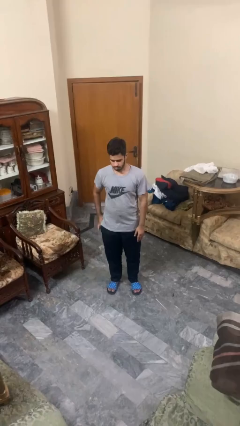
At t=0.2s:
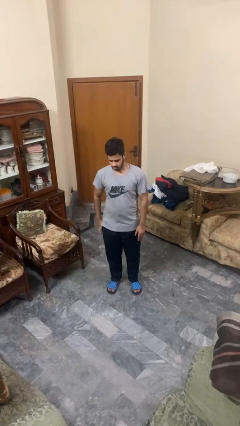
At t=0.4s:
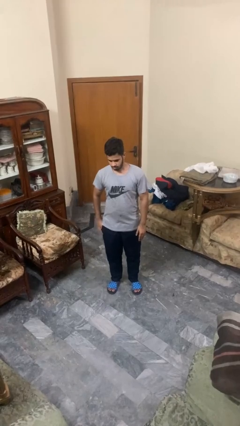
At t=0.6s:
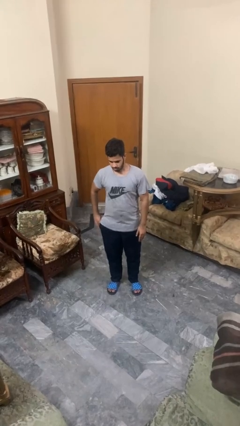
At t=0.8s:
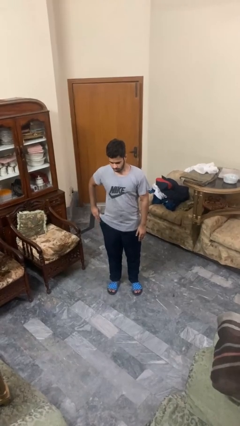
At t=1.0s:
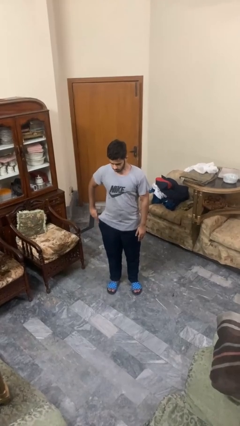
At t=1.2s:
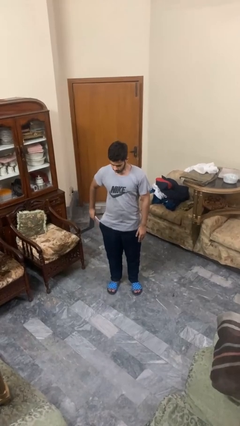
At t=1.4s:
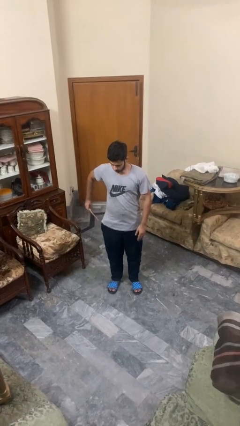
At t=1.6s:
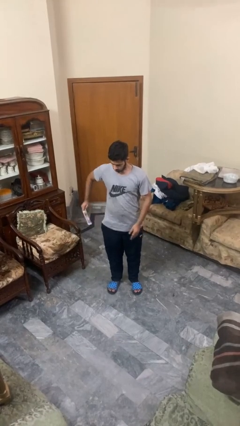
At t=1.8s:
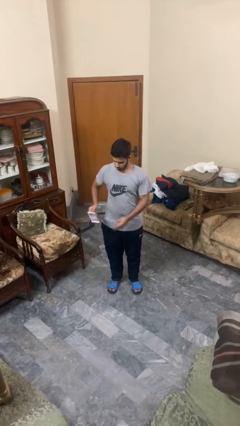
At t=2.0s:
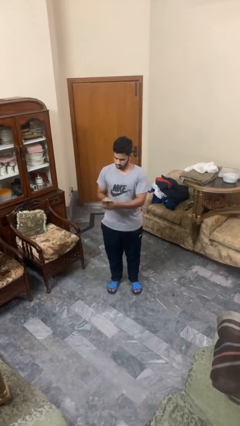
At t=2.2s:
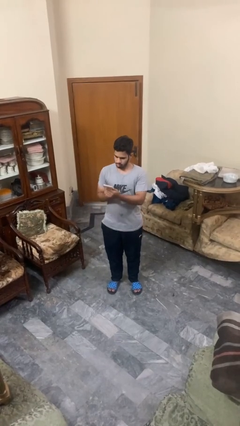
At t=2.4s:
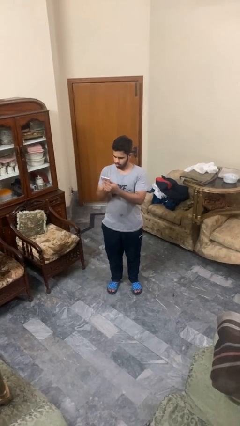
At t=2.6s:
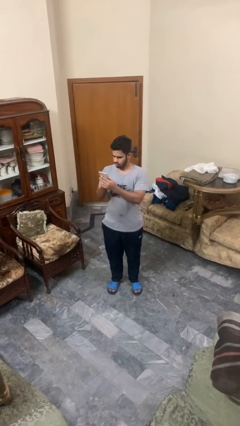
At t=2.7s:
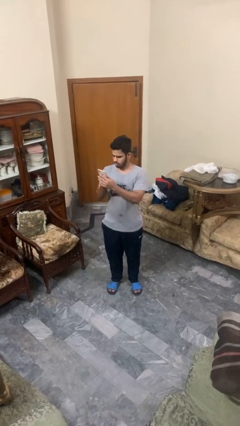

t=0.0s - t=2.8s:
person takes phone from pocket

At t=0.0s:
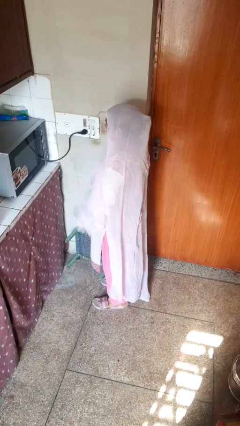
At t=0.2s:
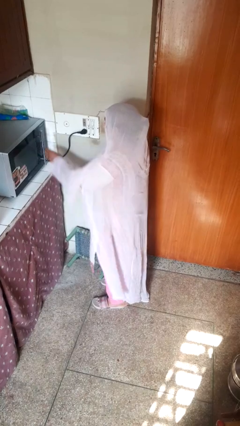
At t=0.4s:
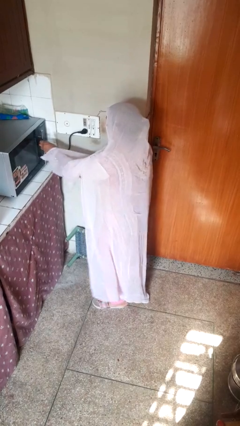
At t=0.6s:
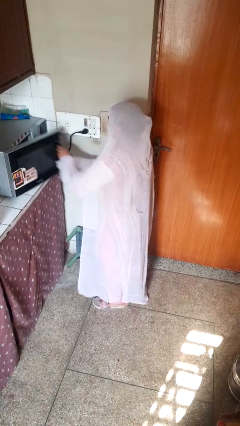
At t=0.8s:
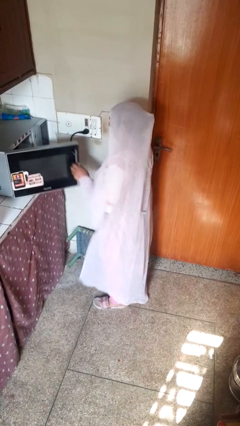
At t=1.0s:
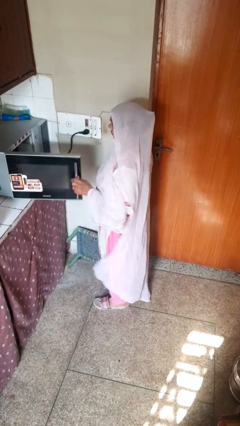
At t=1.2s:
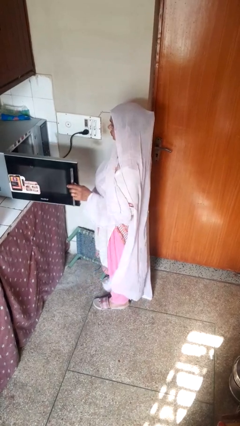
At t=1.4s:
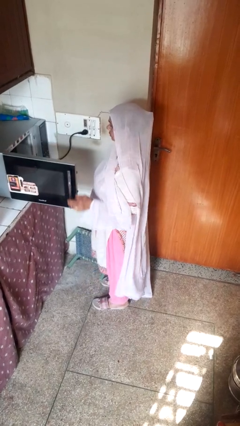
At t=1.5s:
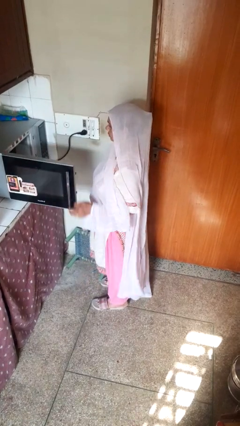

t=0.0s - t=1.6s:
person opens oven door

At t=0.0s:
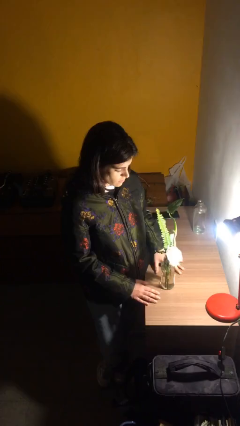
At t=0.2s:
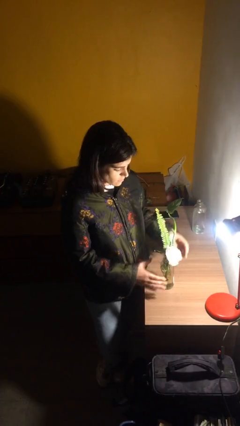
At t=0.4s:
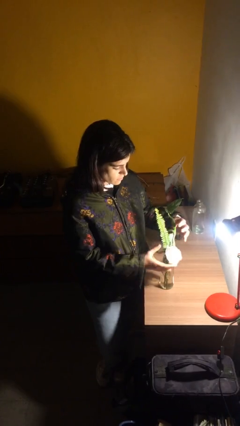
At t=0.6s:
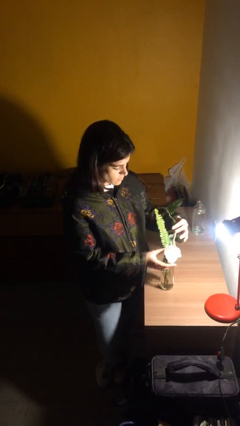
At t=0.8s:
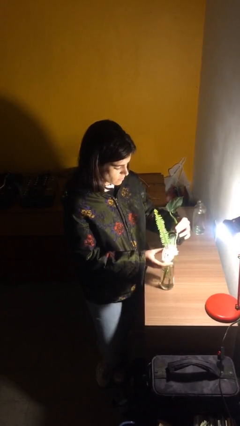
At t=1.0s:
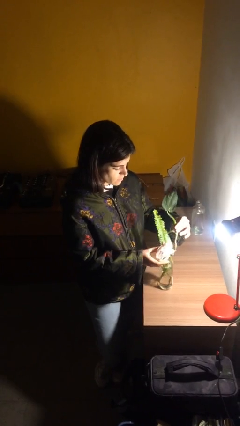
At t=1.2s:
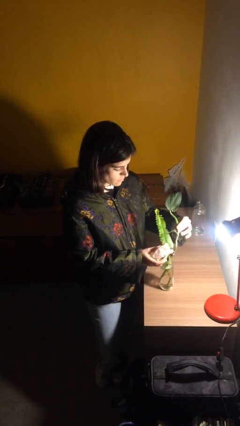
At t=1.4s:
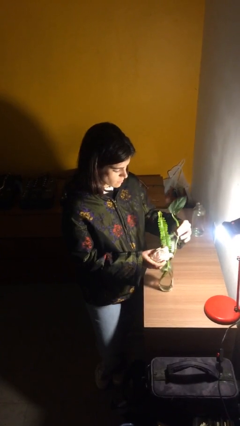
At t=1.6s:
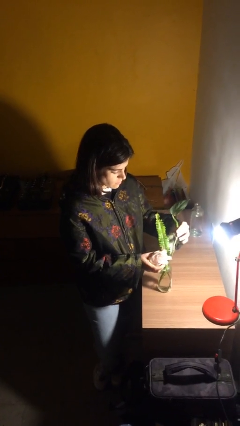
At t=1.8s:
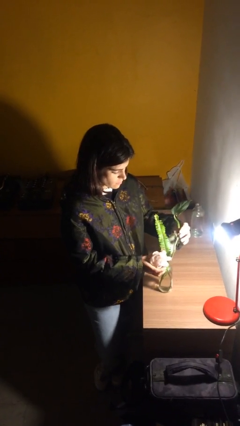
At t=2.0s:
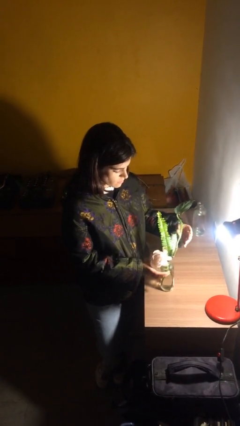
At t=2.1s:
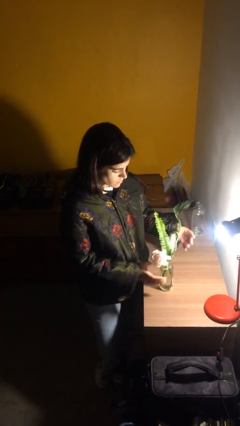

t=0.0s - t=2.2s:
person arranges flowers in vase

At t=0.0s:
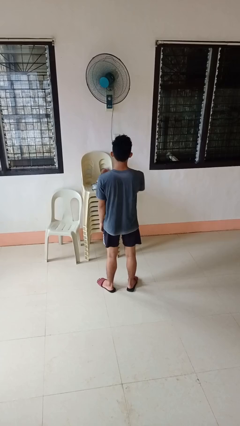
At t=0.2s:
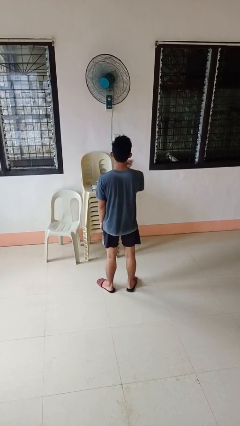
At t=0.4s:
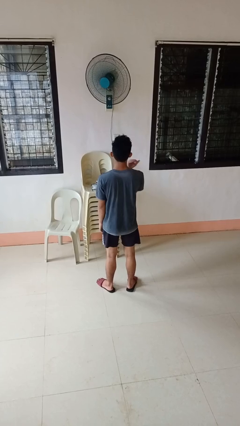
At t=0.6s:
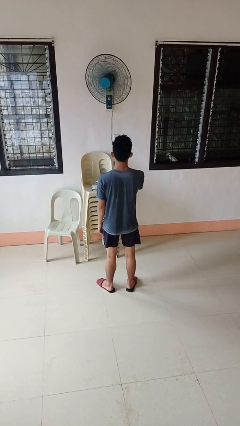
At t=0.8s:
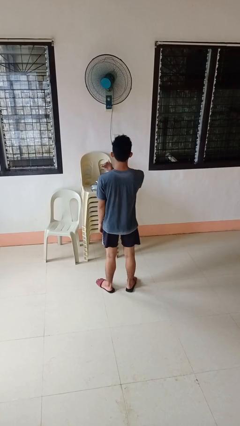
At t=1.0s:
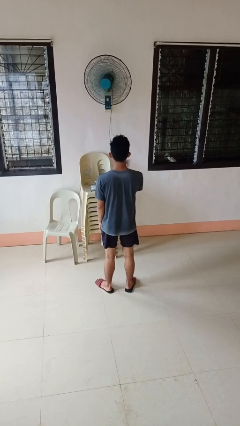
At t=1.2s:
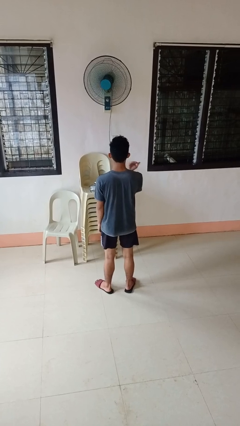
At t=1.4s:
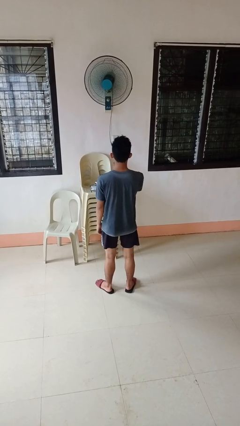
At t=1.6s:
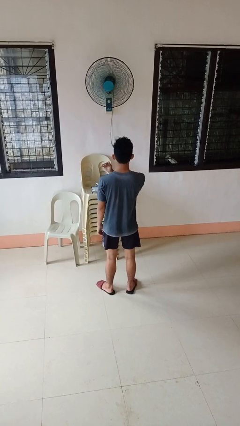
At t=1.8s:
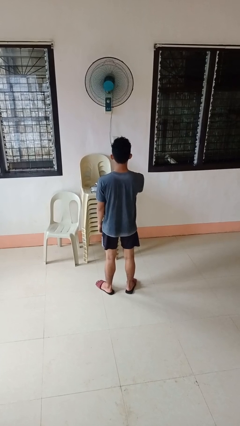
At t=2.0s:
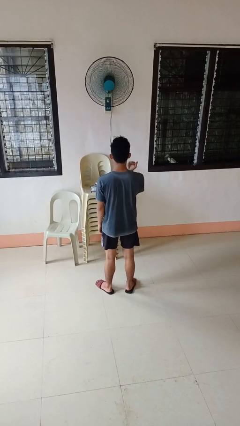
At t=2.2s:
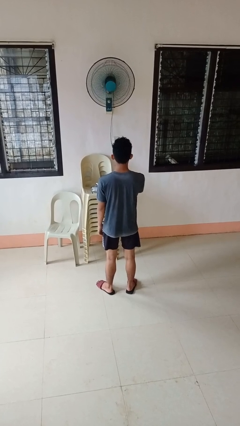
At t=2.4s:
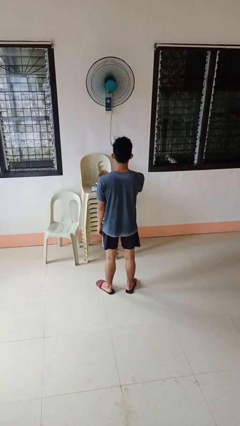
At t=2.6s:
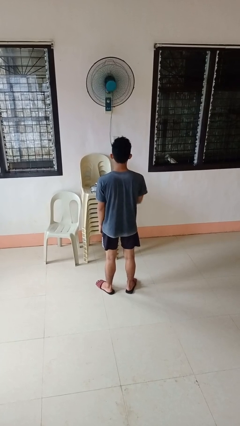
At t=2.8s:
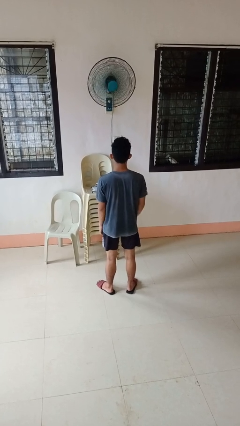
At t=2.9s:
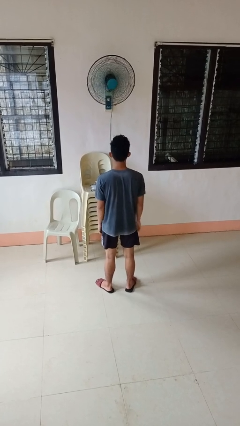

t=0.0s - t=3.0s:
person gestures cut

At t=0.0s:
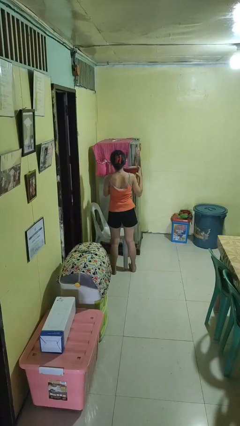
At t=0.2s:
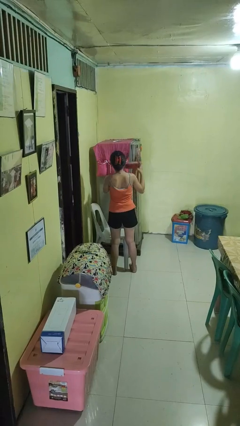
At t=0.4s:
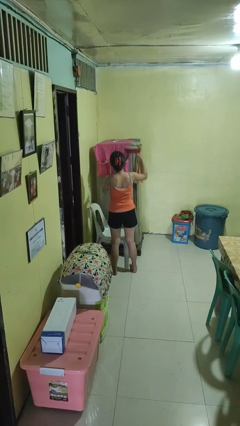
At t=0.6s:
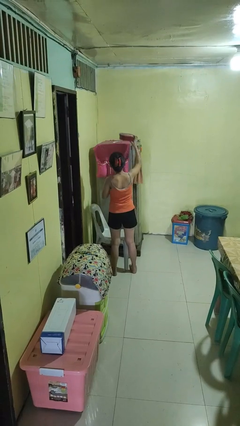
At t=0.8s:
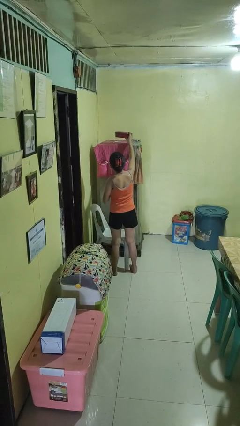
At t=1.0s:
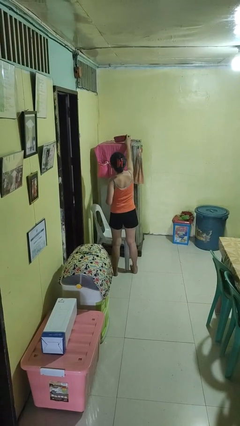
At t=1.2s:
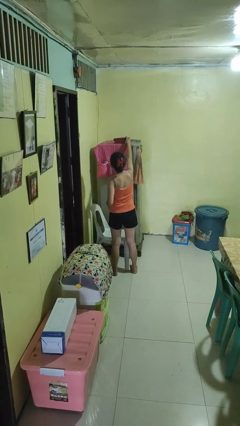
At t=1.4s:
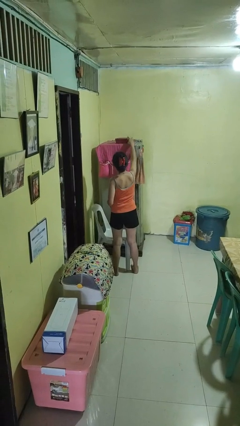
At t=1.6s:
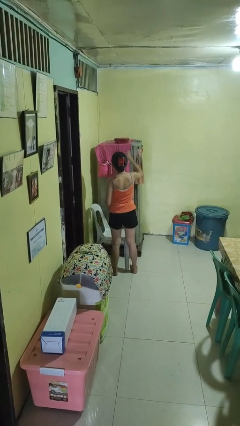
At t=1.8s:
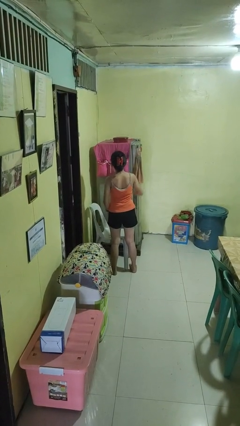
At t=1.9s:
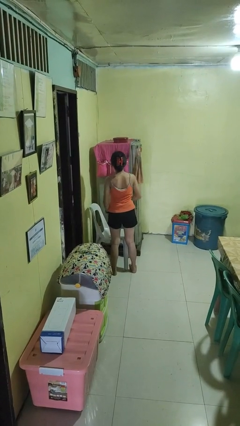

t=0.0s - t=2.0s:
person puts down object on shelf

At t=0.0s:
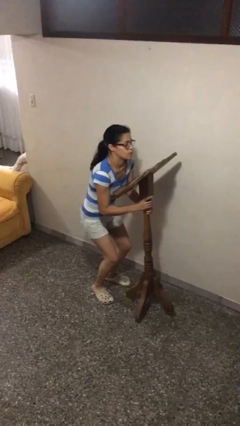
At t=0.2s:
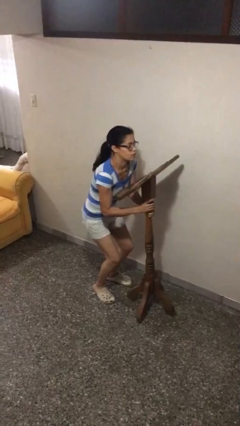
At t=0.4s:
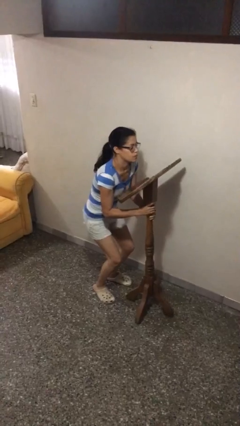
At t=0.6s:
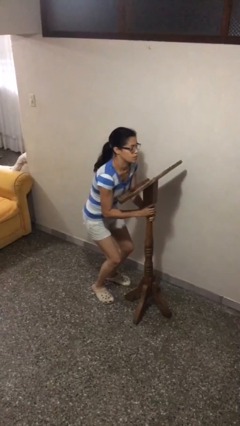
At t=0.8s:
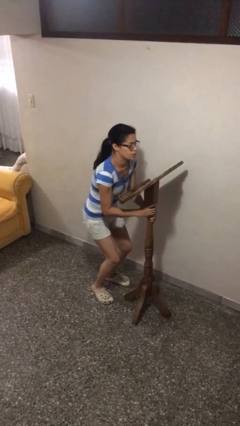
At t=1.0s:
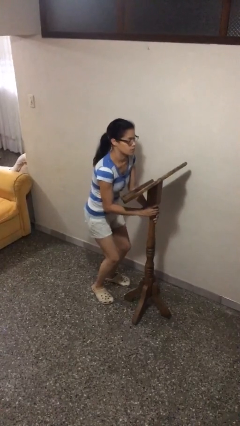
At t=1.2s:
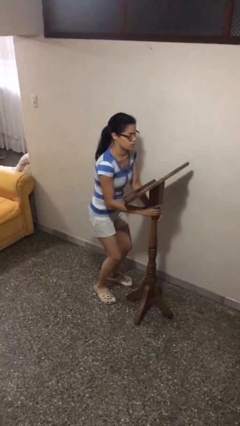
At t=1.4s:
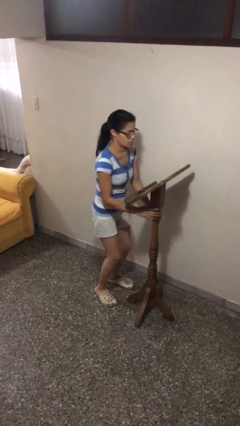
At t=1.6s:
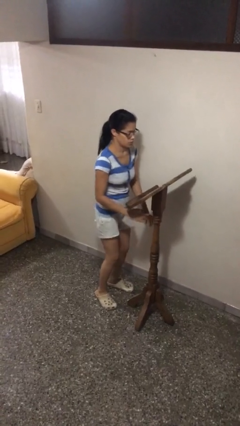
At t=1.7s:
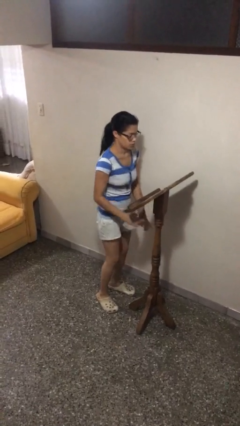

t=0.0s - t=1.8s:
person puts down object on floor

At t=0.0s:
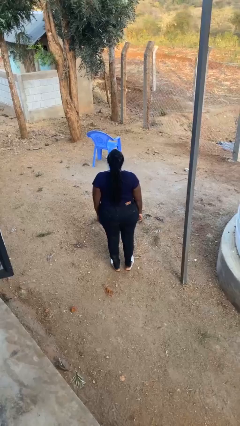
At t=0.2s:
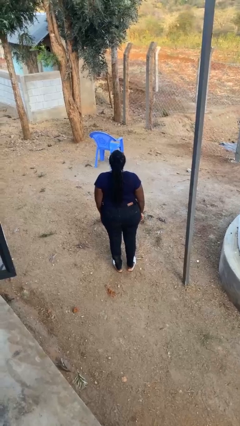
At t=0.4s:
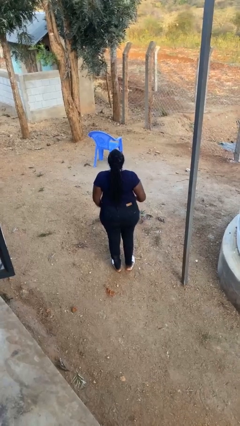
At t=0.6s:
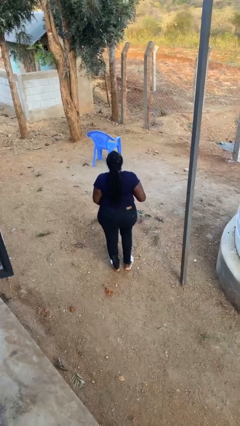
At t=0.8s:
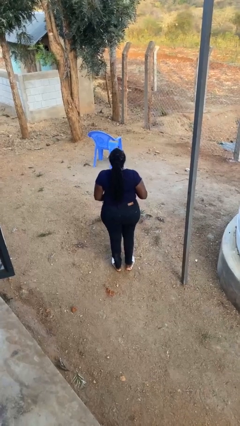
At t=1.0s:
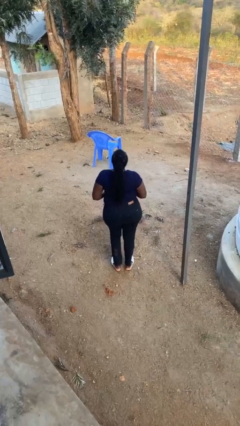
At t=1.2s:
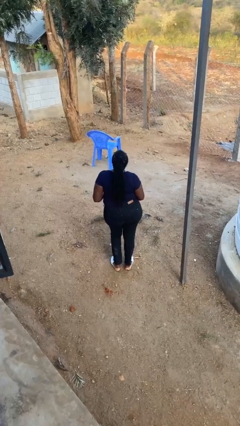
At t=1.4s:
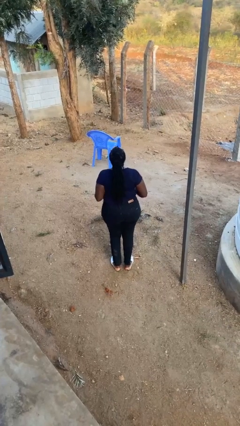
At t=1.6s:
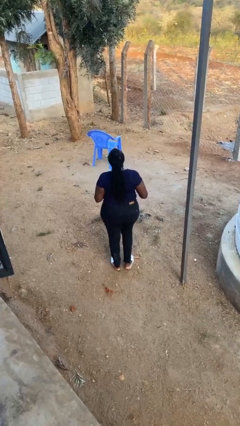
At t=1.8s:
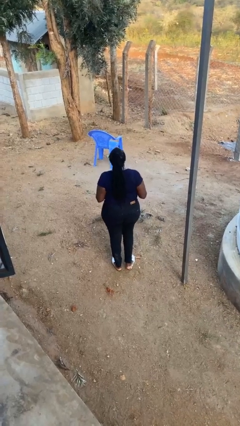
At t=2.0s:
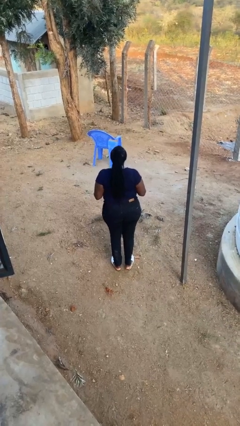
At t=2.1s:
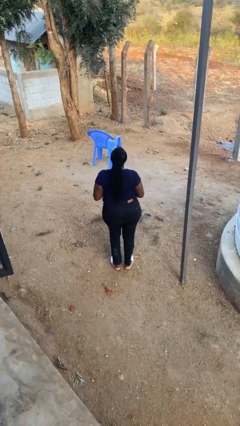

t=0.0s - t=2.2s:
person wiggles hips

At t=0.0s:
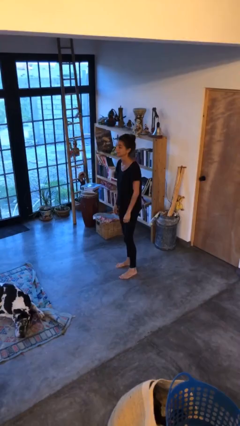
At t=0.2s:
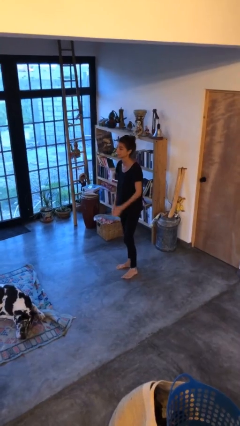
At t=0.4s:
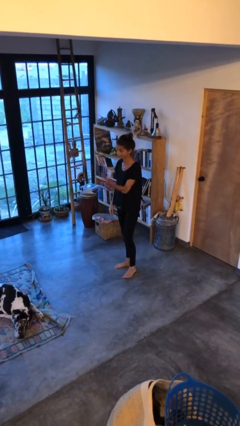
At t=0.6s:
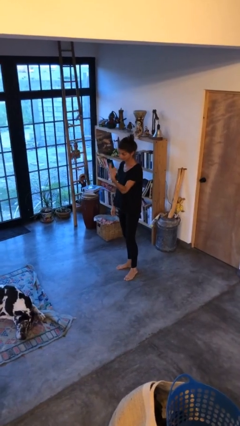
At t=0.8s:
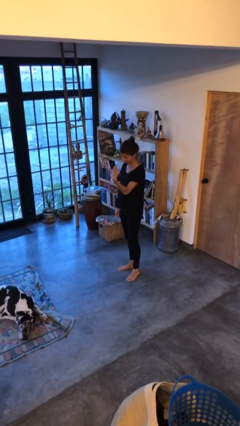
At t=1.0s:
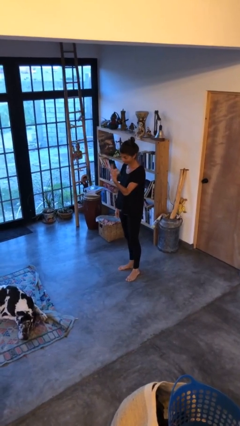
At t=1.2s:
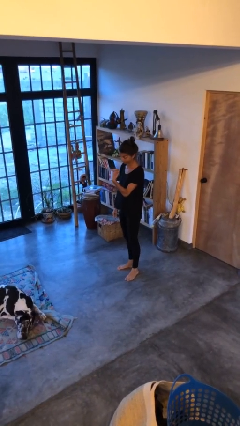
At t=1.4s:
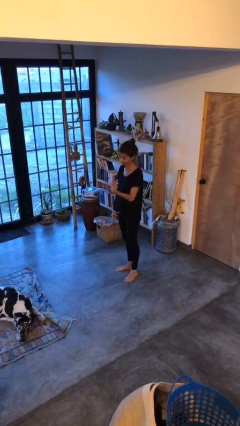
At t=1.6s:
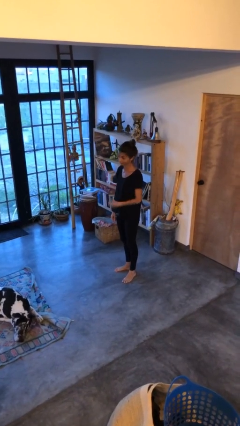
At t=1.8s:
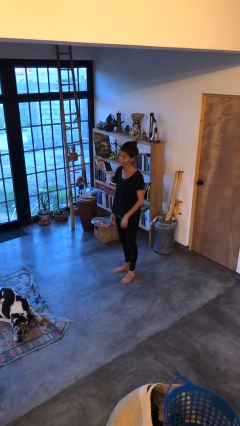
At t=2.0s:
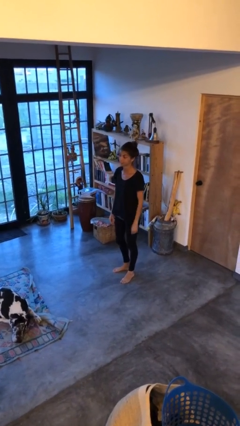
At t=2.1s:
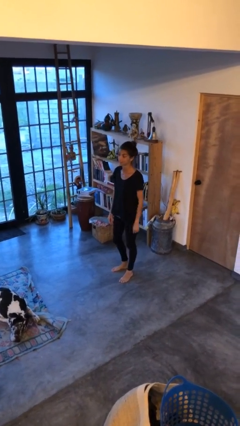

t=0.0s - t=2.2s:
person gestures come here
